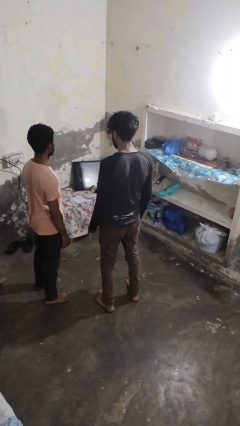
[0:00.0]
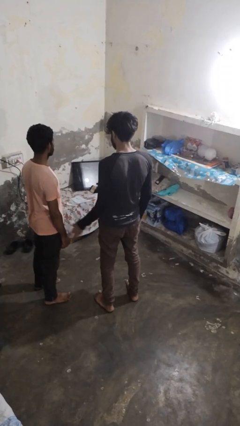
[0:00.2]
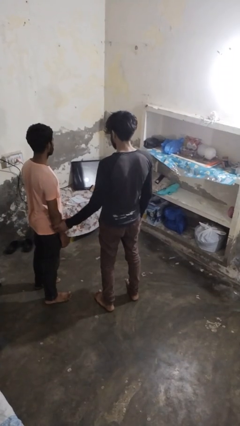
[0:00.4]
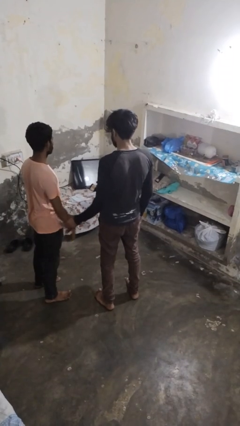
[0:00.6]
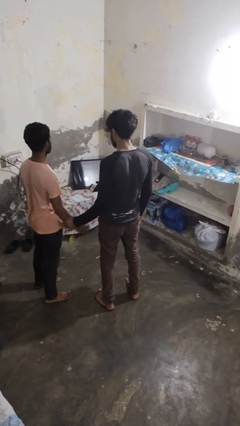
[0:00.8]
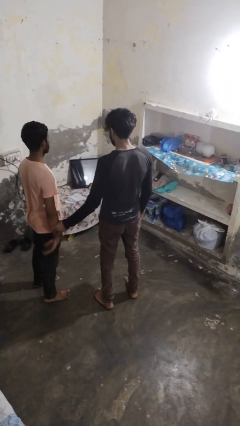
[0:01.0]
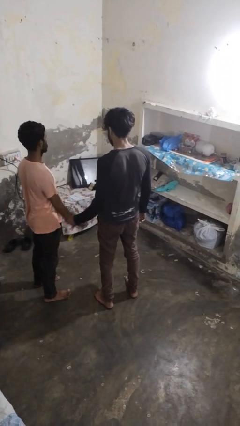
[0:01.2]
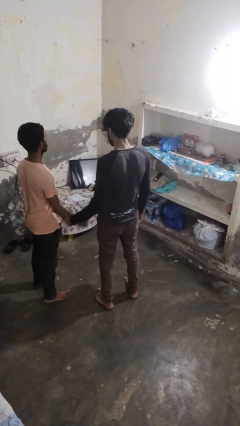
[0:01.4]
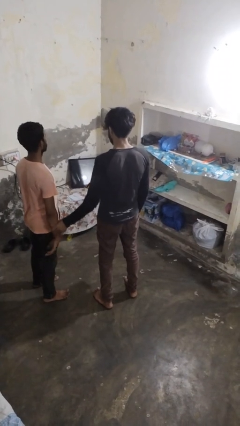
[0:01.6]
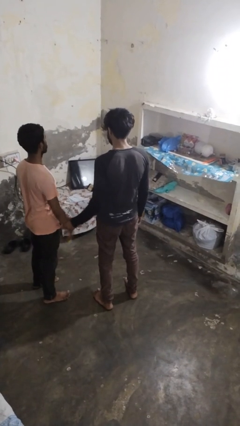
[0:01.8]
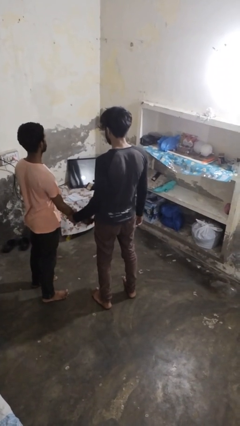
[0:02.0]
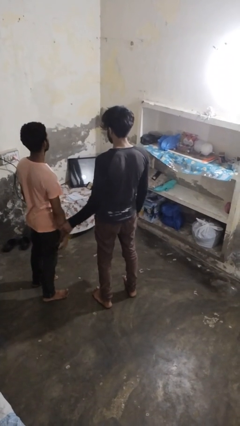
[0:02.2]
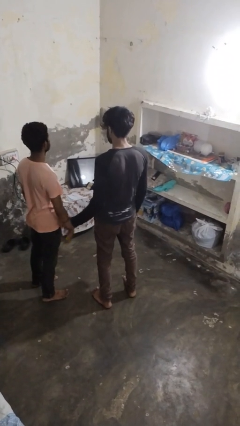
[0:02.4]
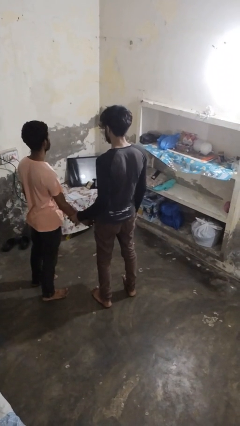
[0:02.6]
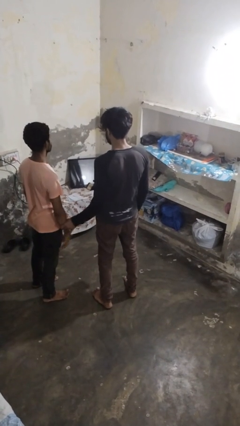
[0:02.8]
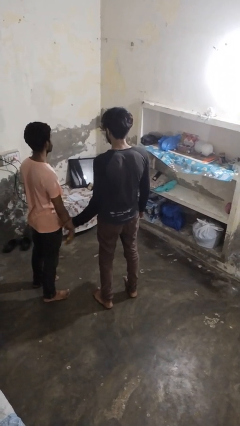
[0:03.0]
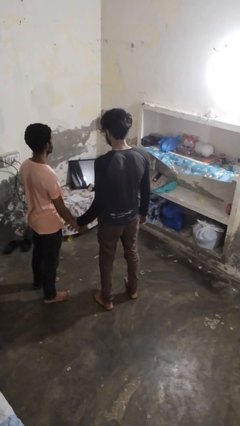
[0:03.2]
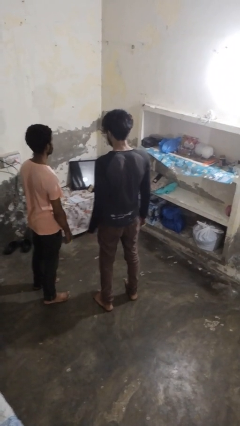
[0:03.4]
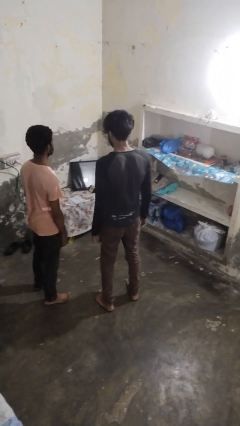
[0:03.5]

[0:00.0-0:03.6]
person grabs person by forearm

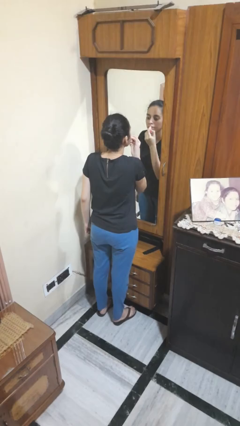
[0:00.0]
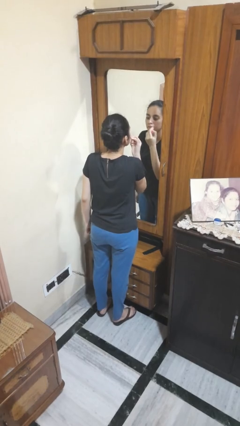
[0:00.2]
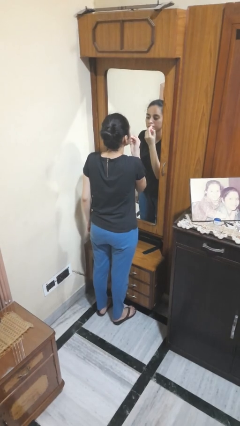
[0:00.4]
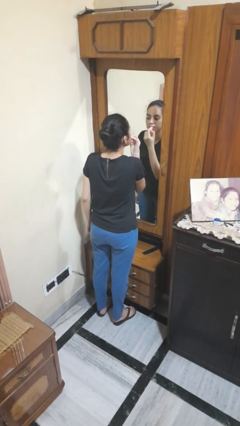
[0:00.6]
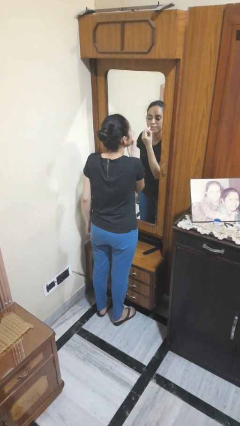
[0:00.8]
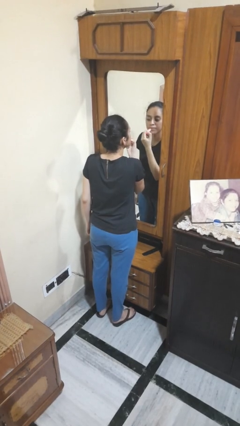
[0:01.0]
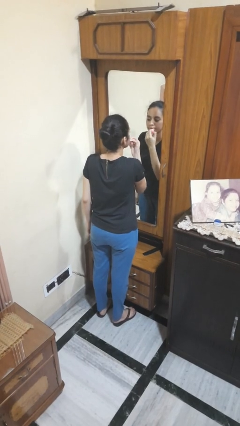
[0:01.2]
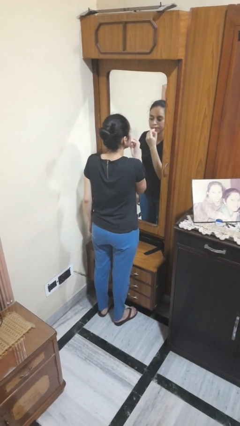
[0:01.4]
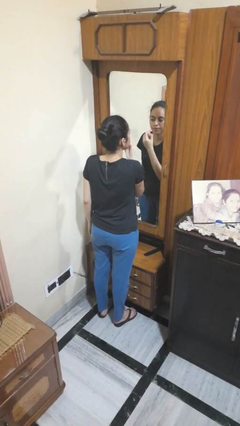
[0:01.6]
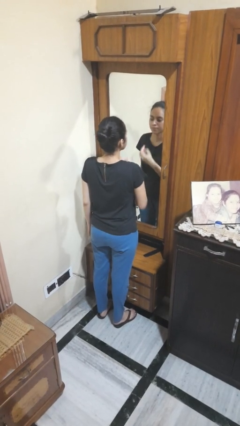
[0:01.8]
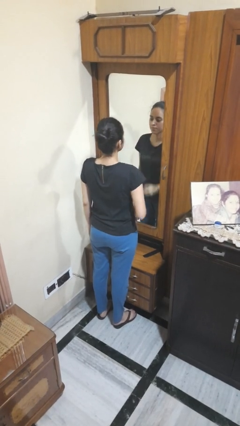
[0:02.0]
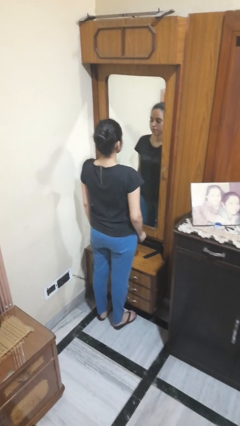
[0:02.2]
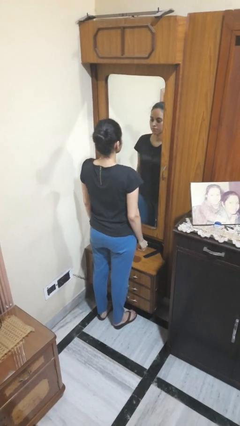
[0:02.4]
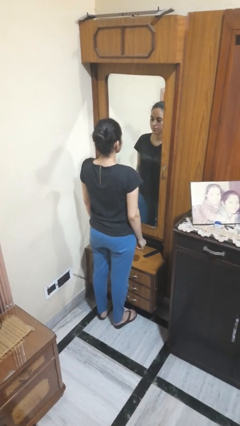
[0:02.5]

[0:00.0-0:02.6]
person applies lip makeup

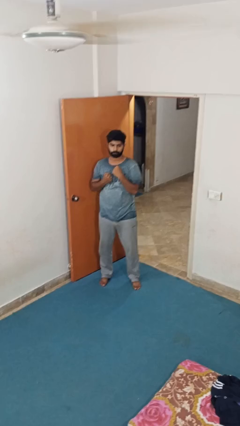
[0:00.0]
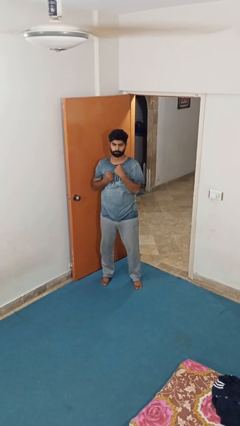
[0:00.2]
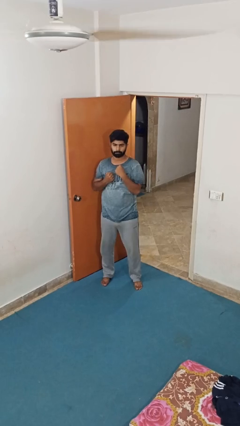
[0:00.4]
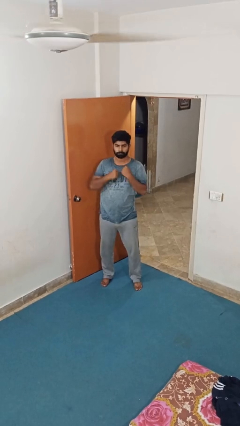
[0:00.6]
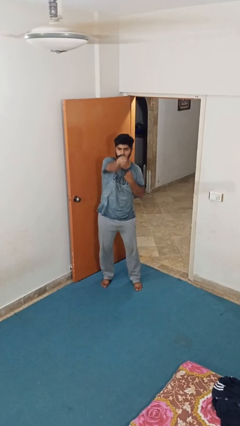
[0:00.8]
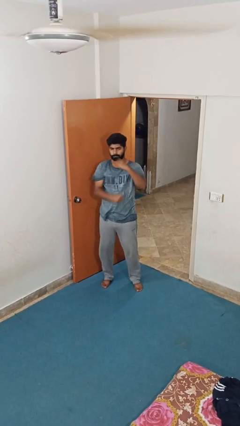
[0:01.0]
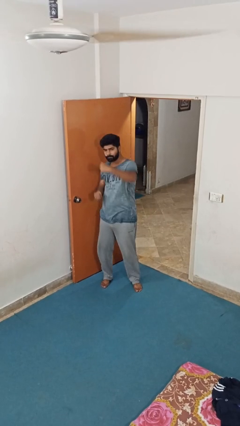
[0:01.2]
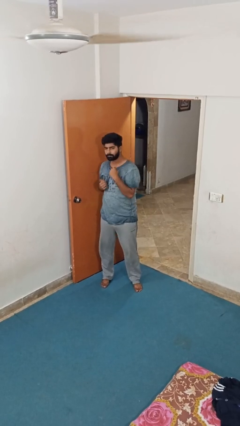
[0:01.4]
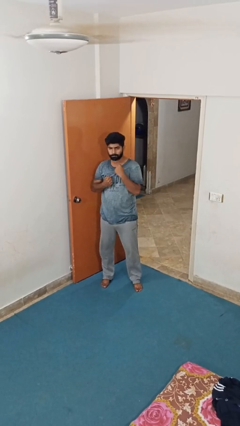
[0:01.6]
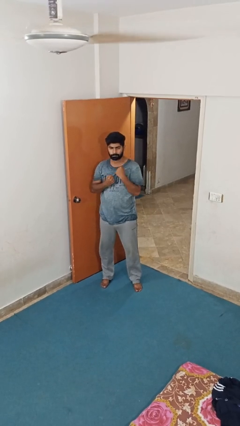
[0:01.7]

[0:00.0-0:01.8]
person punches

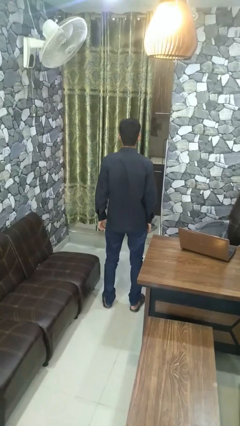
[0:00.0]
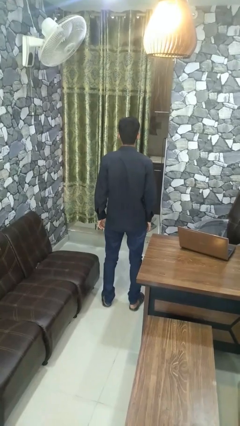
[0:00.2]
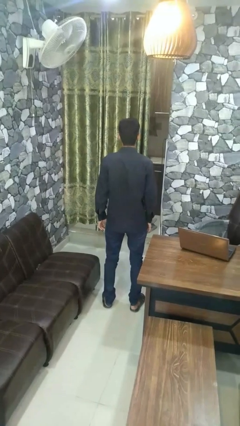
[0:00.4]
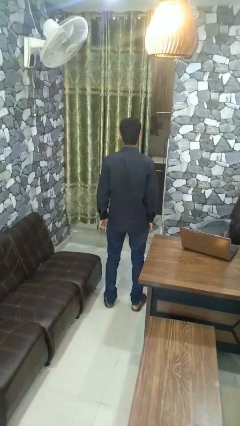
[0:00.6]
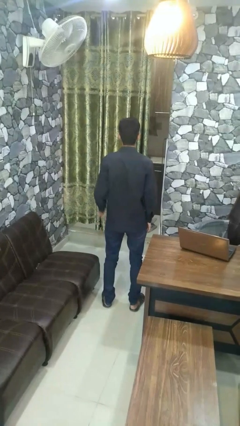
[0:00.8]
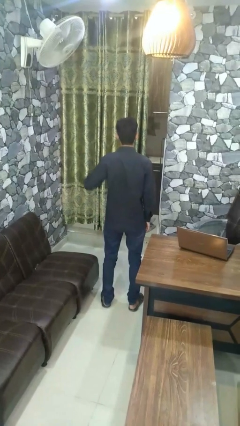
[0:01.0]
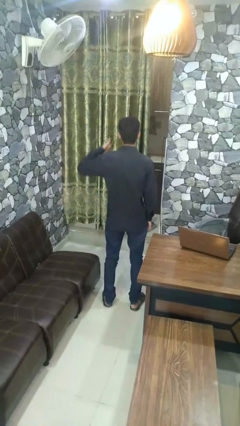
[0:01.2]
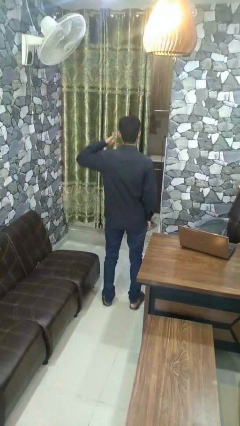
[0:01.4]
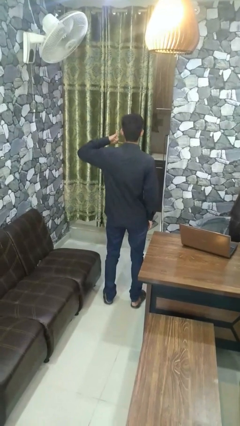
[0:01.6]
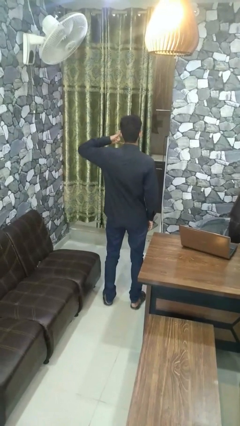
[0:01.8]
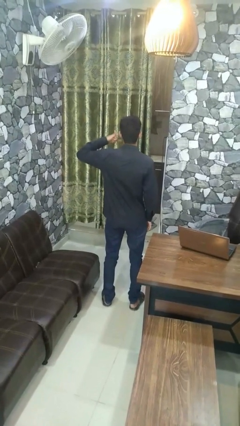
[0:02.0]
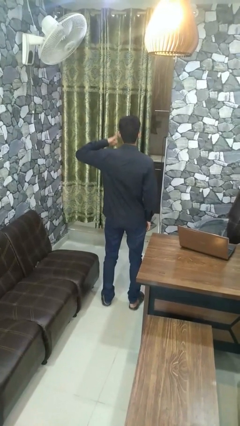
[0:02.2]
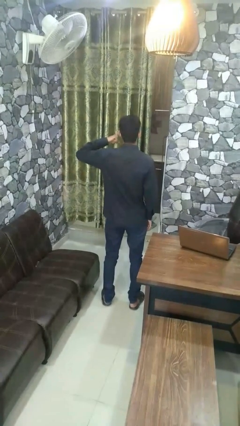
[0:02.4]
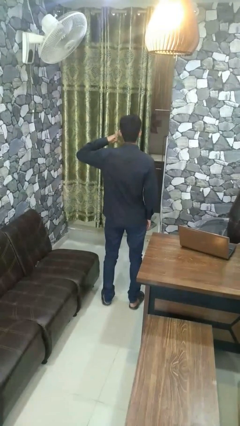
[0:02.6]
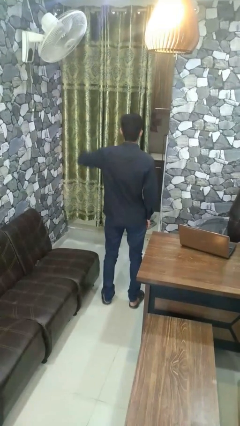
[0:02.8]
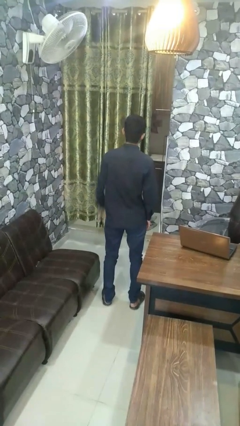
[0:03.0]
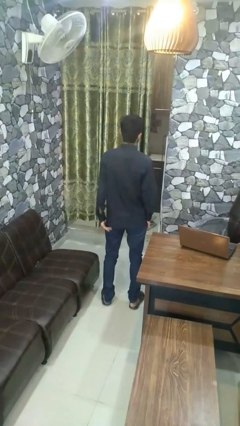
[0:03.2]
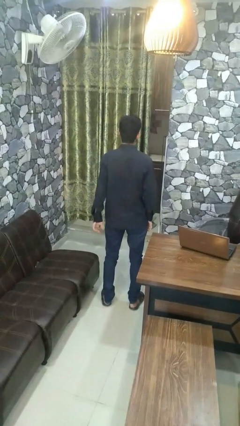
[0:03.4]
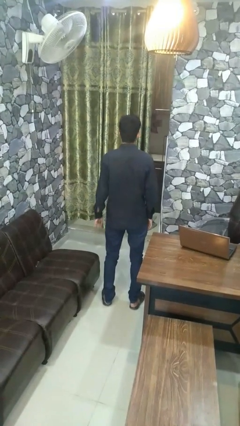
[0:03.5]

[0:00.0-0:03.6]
person gestures call me

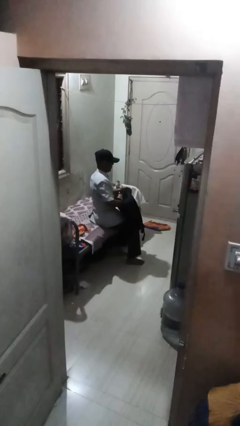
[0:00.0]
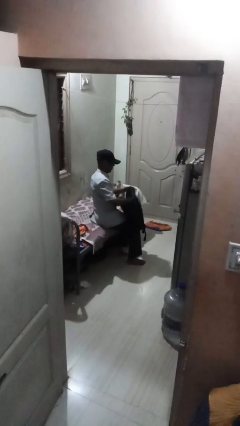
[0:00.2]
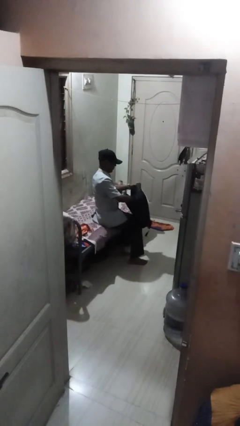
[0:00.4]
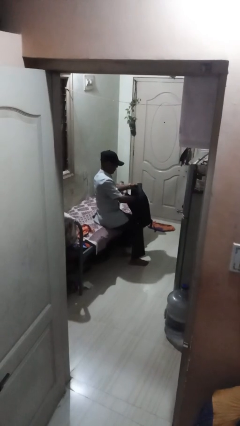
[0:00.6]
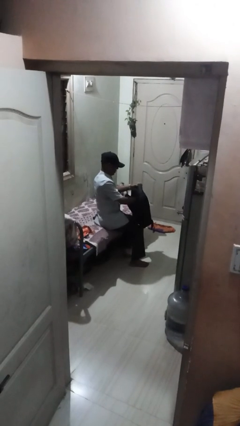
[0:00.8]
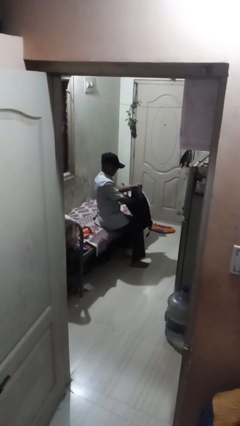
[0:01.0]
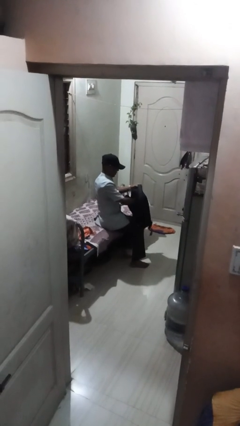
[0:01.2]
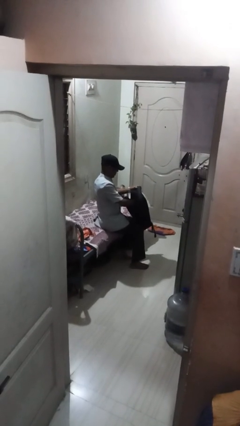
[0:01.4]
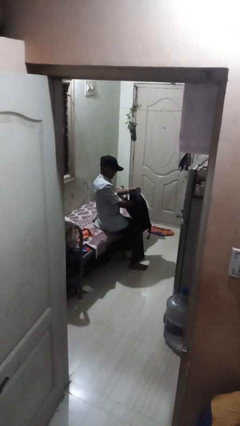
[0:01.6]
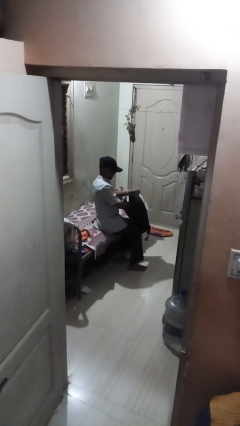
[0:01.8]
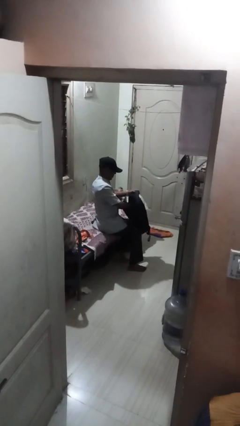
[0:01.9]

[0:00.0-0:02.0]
person searches in backpack

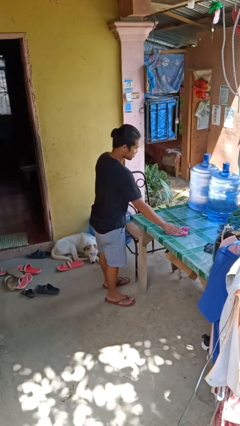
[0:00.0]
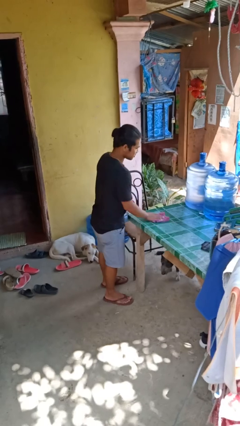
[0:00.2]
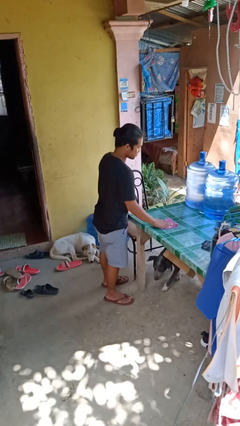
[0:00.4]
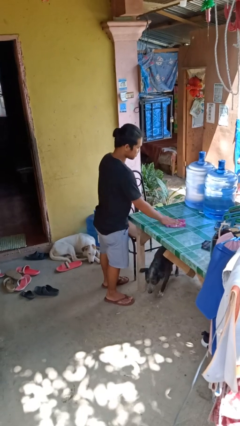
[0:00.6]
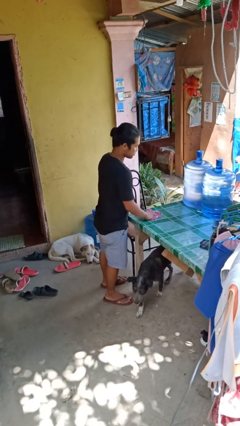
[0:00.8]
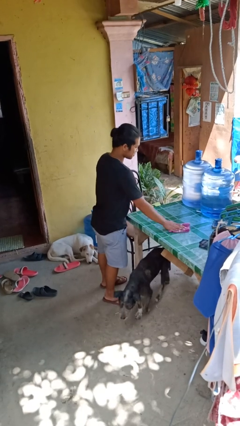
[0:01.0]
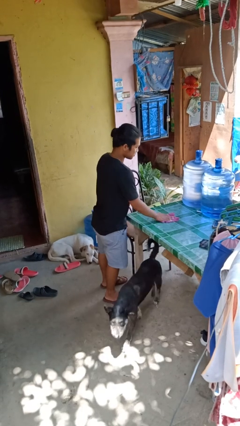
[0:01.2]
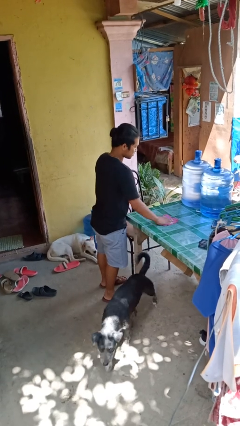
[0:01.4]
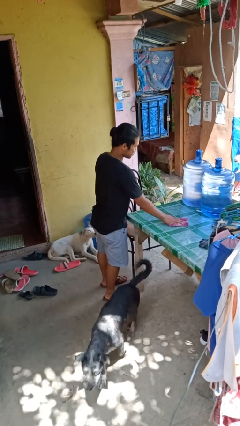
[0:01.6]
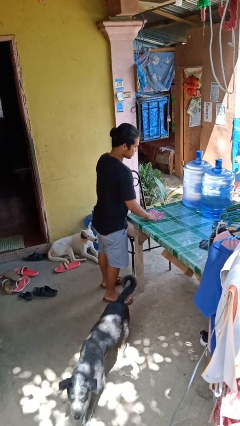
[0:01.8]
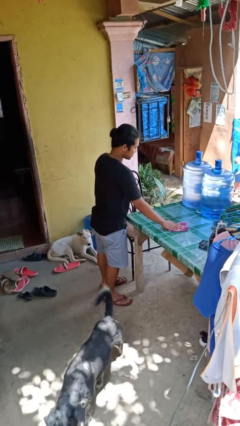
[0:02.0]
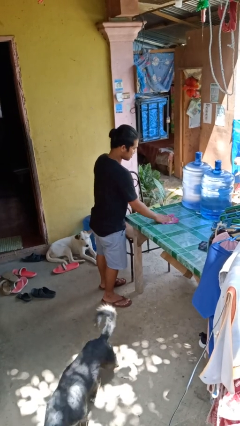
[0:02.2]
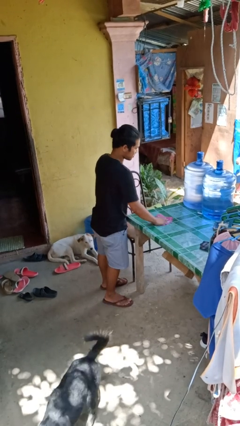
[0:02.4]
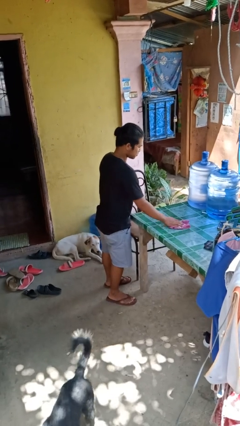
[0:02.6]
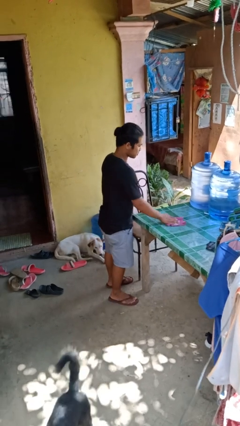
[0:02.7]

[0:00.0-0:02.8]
person cleans table with rag

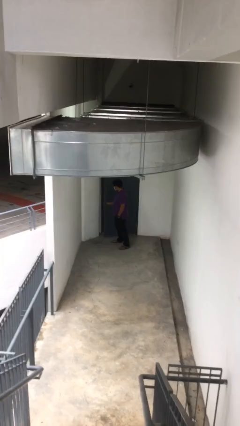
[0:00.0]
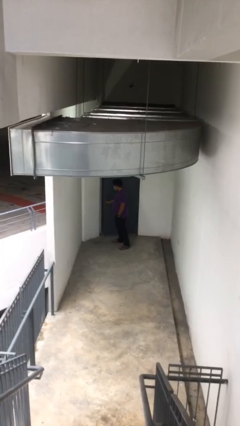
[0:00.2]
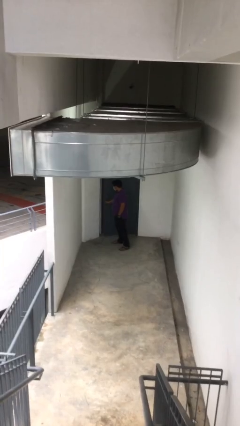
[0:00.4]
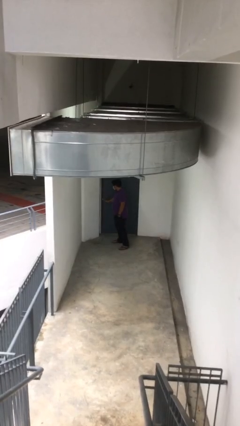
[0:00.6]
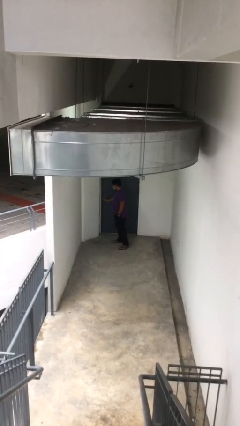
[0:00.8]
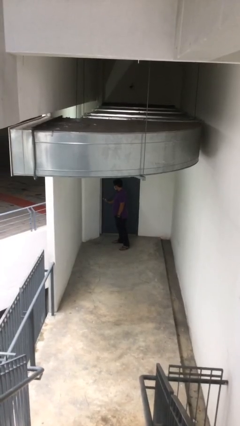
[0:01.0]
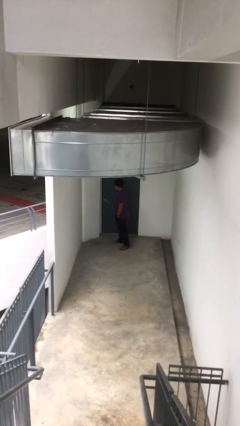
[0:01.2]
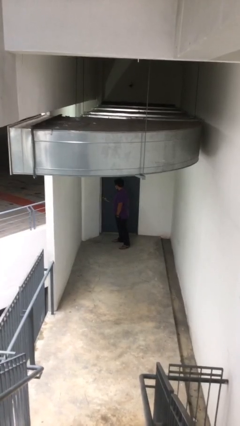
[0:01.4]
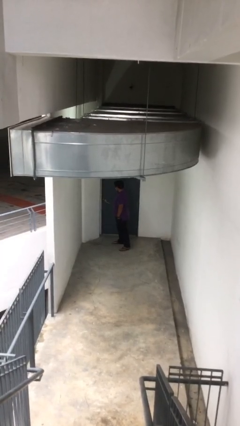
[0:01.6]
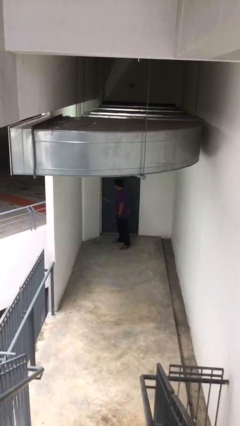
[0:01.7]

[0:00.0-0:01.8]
person closes facility door
